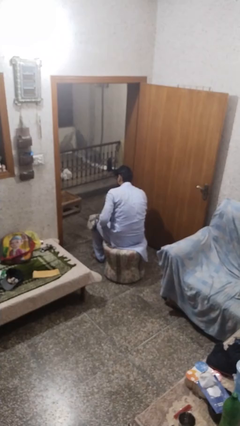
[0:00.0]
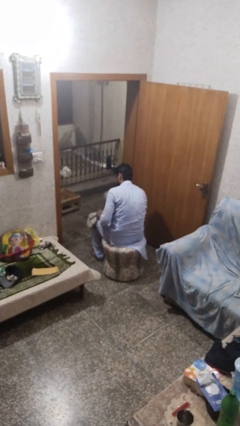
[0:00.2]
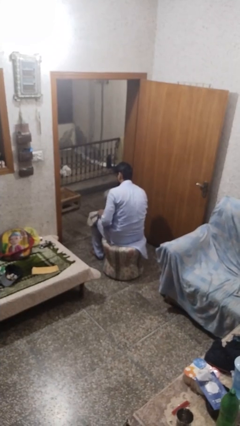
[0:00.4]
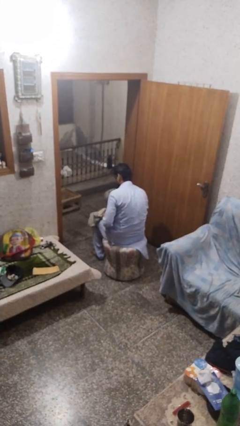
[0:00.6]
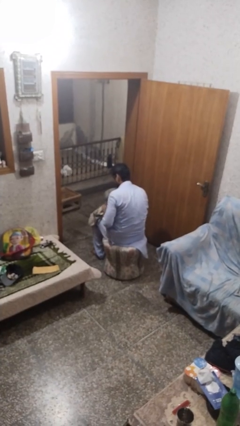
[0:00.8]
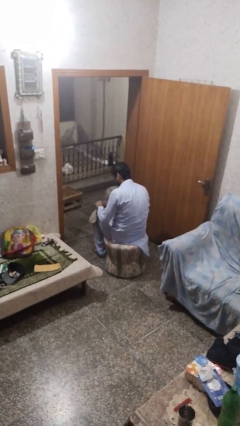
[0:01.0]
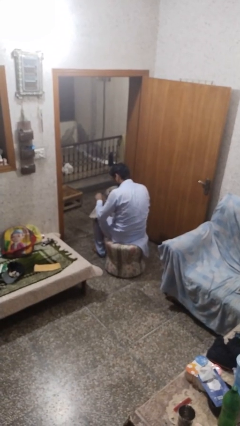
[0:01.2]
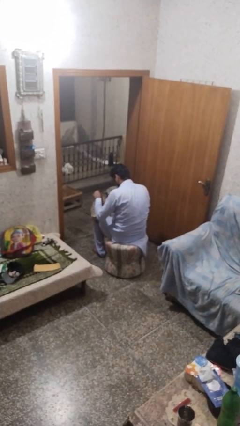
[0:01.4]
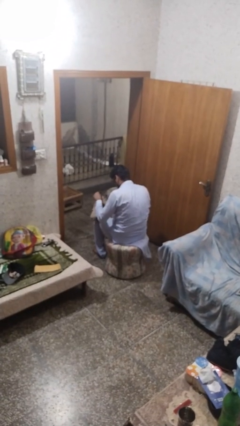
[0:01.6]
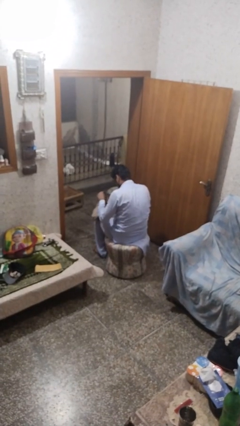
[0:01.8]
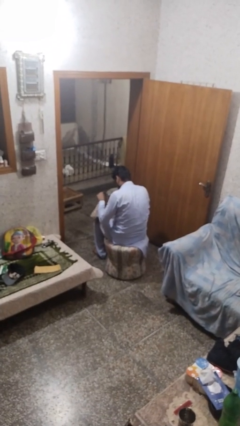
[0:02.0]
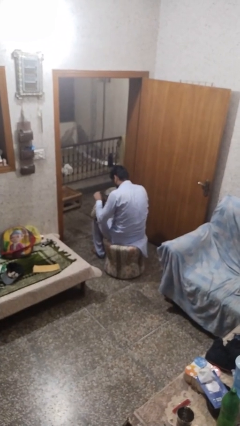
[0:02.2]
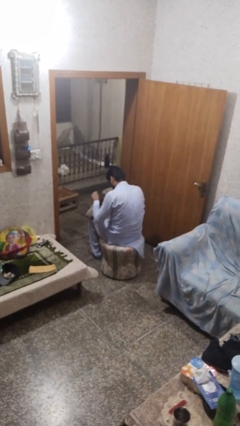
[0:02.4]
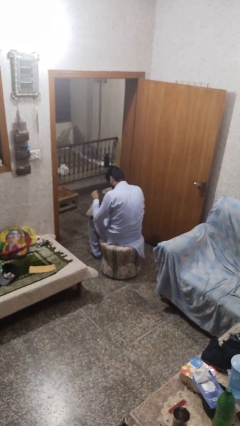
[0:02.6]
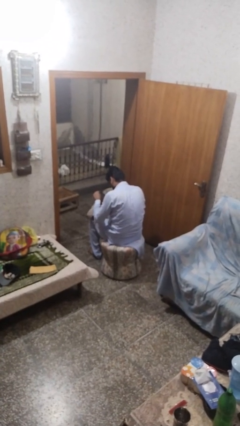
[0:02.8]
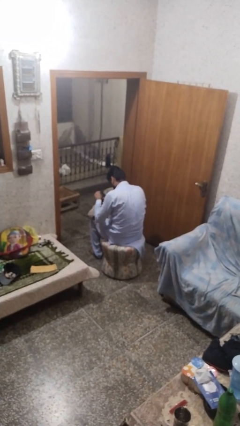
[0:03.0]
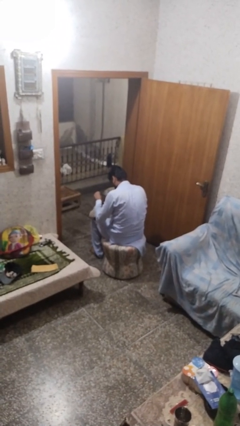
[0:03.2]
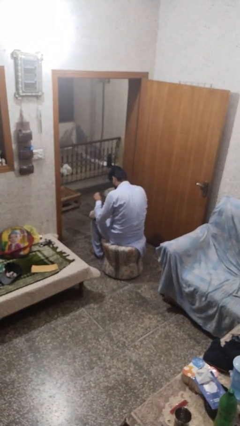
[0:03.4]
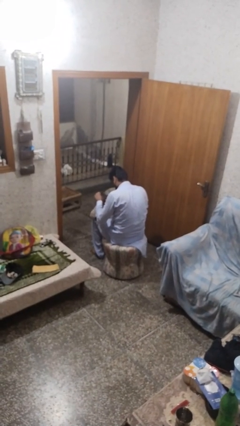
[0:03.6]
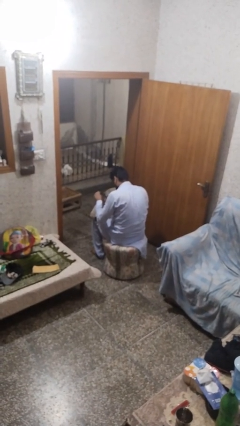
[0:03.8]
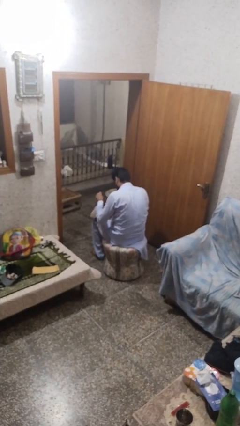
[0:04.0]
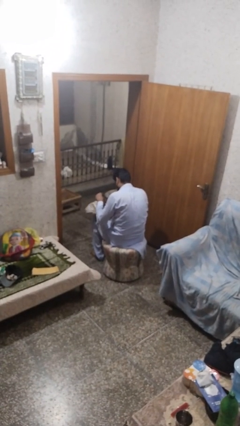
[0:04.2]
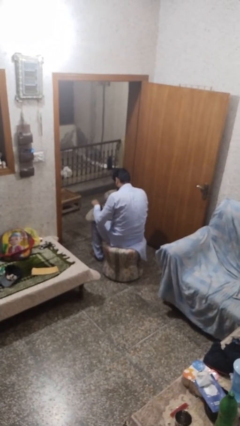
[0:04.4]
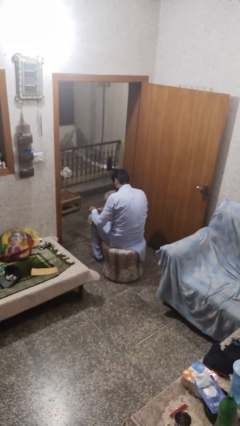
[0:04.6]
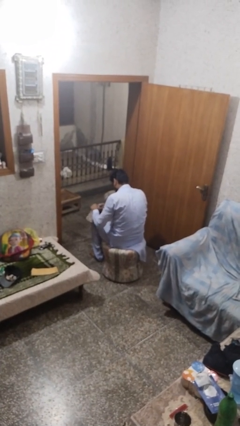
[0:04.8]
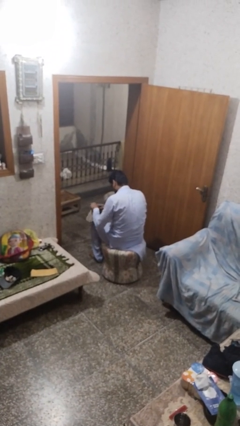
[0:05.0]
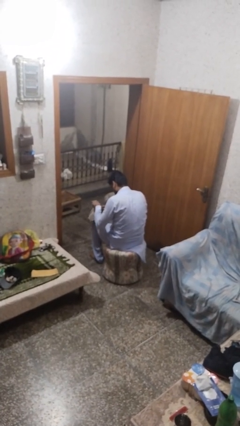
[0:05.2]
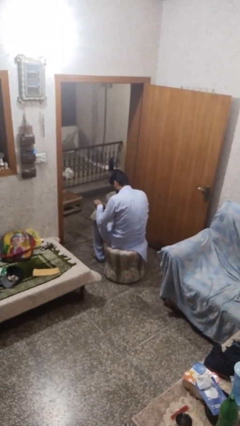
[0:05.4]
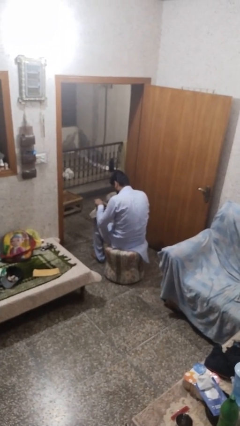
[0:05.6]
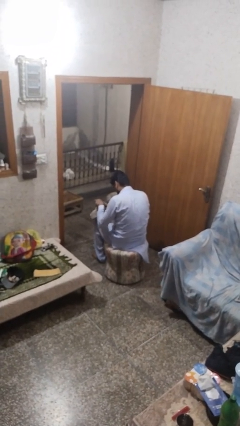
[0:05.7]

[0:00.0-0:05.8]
person searches in purse

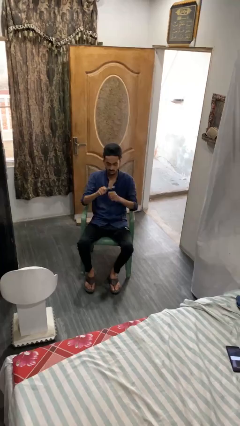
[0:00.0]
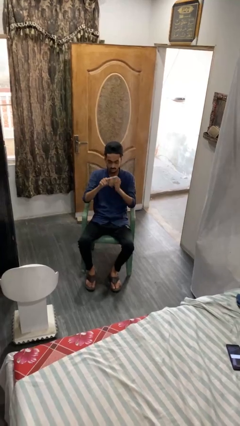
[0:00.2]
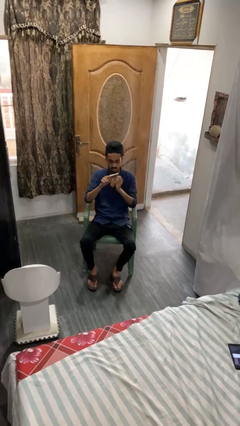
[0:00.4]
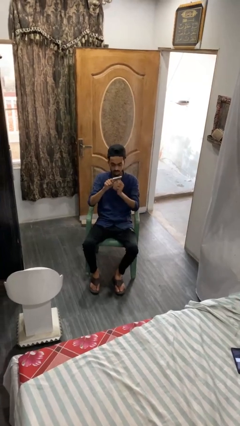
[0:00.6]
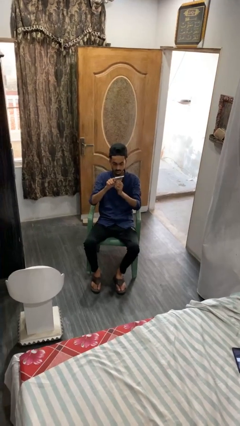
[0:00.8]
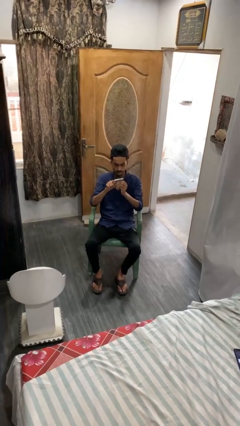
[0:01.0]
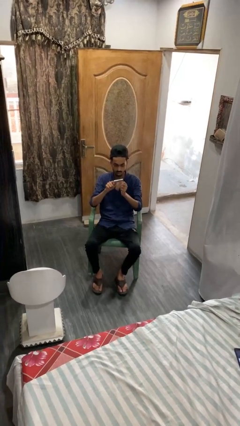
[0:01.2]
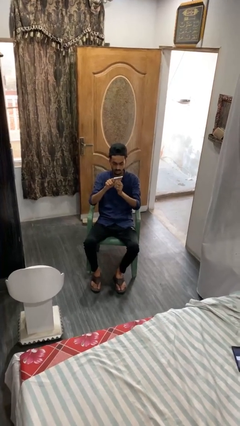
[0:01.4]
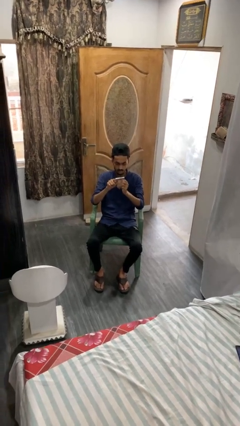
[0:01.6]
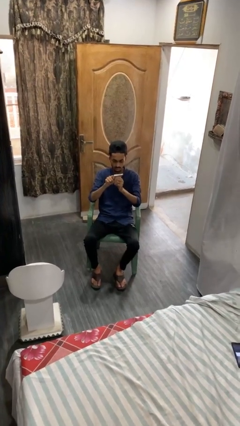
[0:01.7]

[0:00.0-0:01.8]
person files fingernails

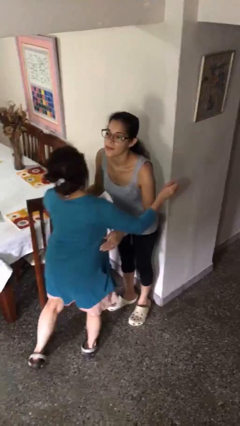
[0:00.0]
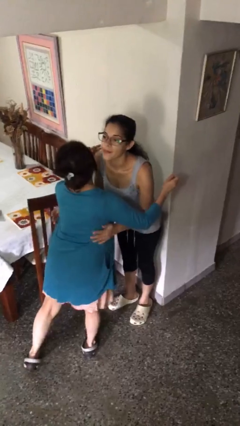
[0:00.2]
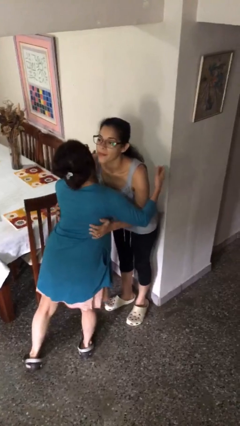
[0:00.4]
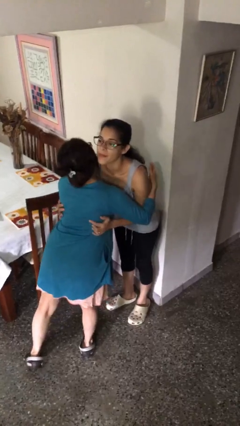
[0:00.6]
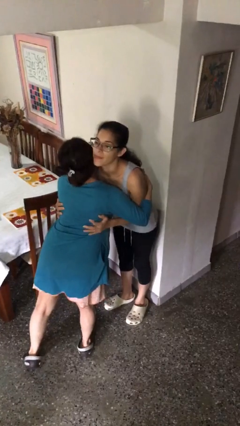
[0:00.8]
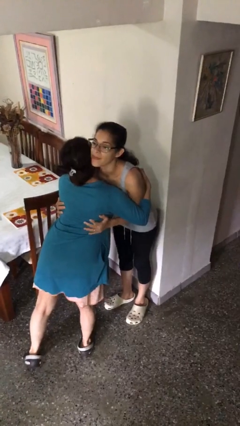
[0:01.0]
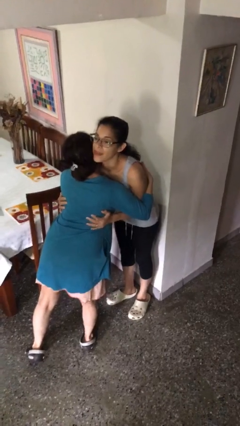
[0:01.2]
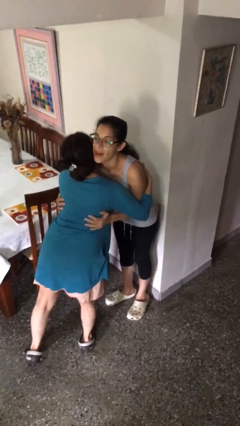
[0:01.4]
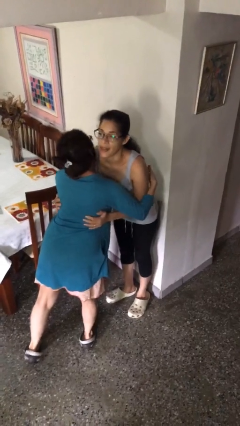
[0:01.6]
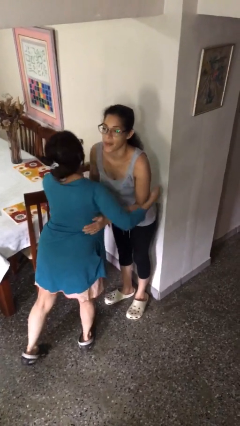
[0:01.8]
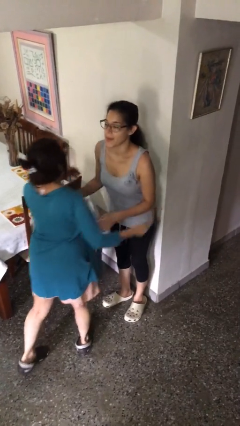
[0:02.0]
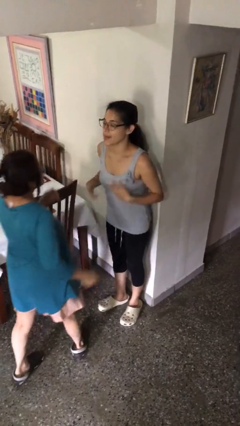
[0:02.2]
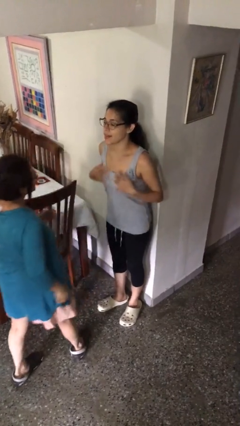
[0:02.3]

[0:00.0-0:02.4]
person embraces person

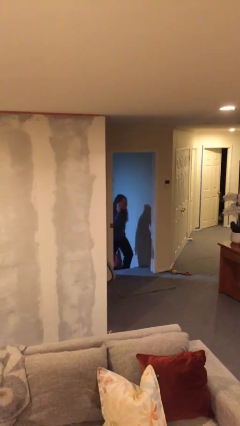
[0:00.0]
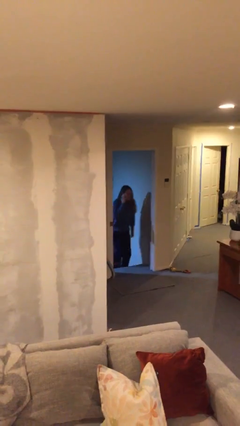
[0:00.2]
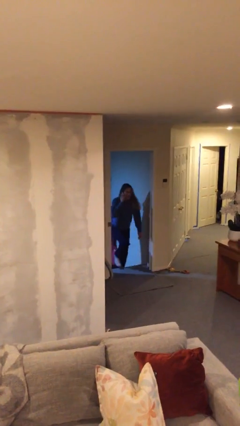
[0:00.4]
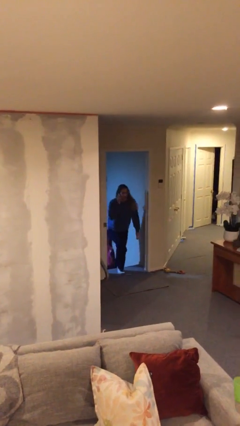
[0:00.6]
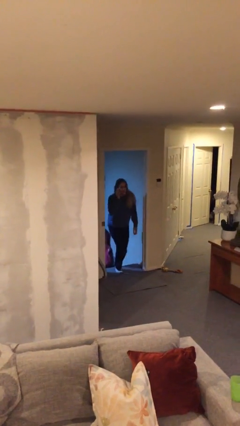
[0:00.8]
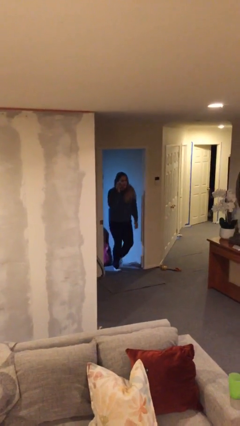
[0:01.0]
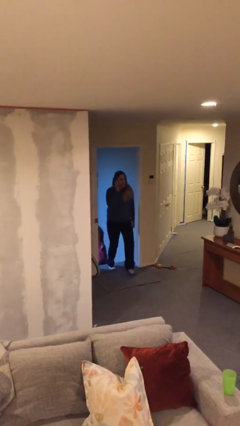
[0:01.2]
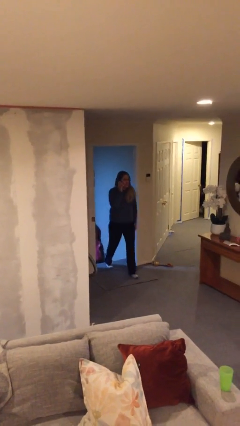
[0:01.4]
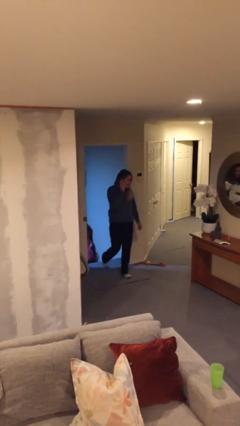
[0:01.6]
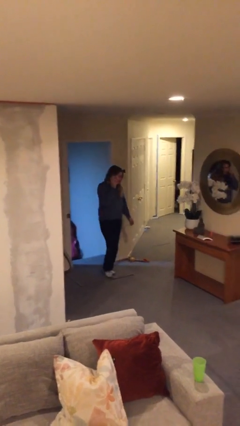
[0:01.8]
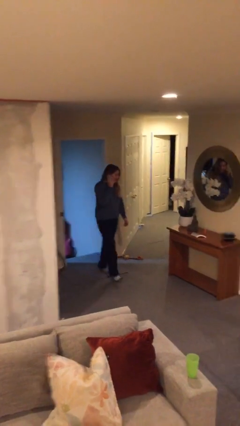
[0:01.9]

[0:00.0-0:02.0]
person enters scene through structure

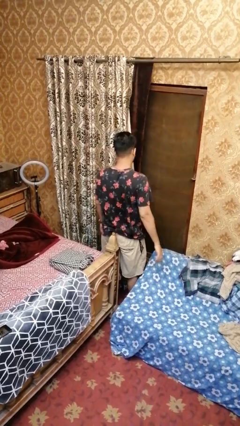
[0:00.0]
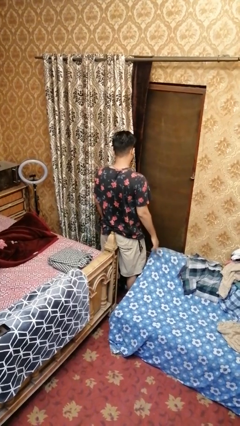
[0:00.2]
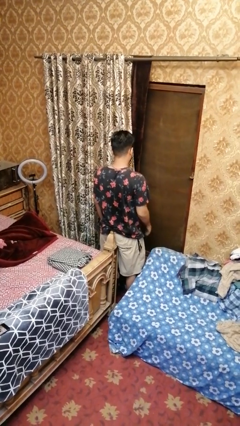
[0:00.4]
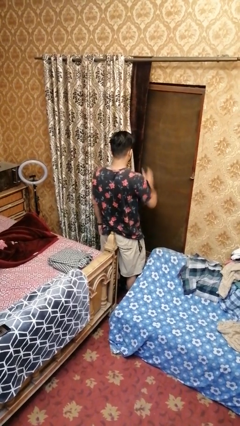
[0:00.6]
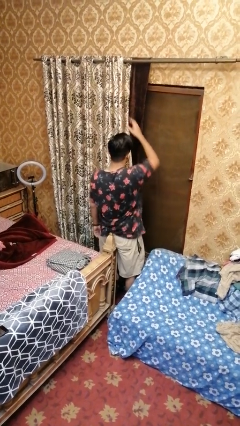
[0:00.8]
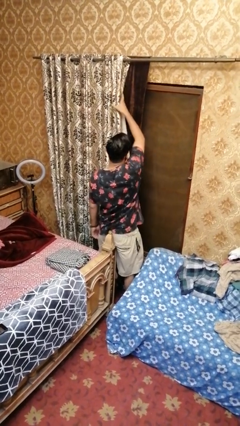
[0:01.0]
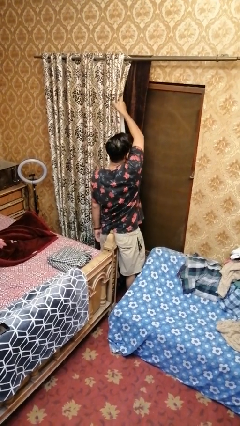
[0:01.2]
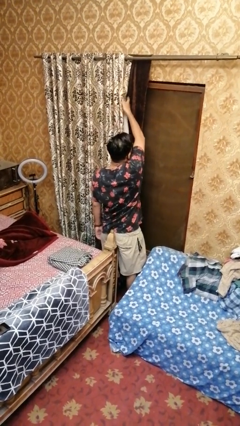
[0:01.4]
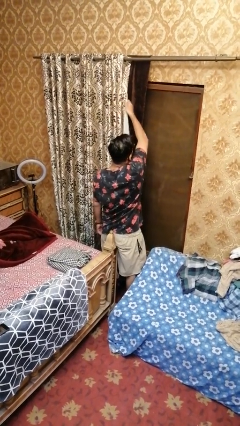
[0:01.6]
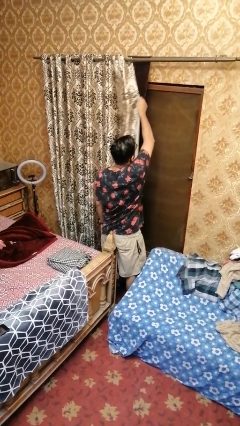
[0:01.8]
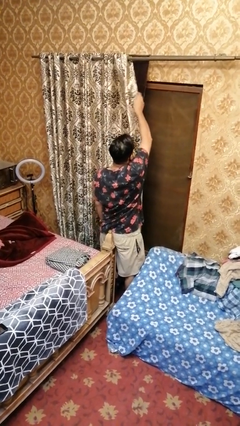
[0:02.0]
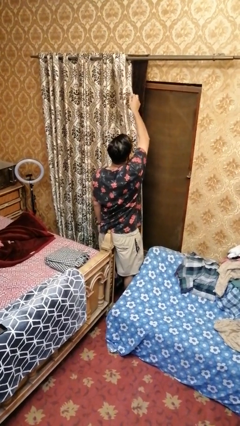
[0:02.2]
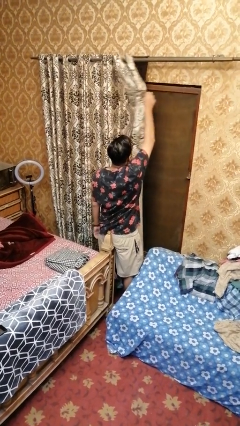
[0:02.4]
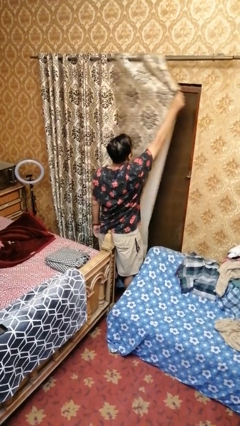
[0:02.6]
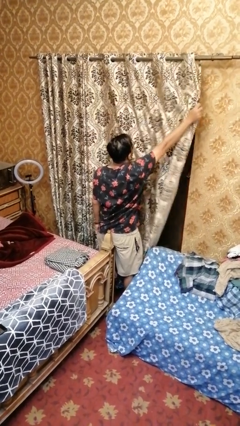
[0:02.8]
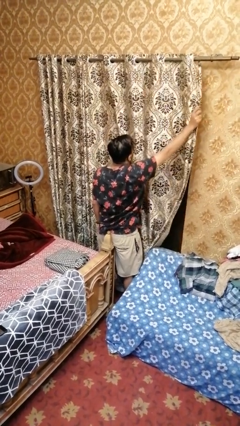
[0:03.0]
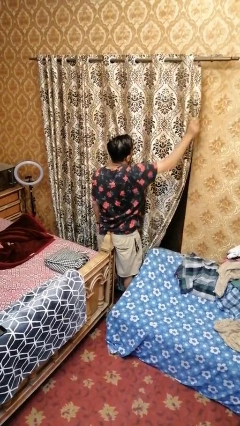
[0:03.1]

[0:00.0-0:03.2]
person closes curtains

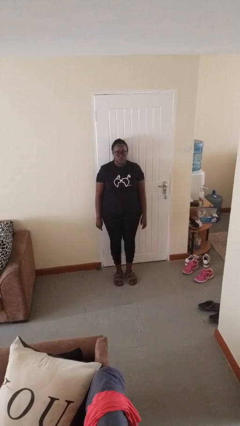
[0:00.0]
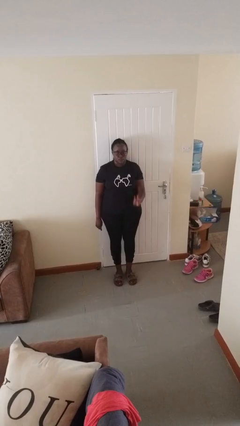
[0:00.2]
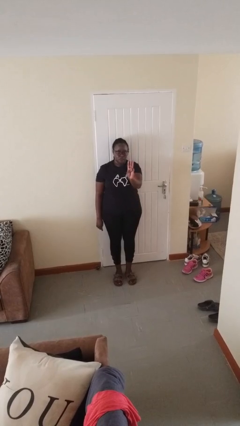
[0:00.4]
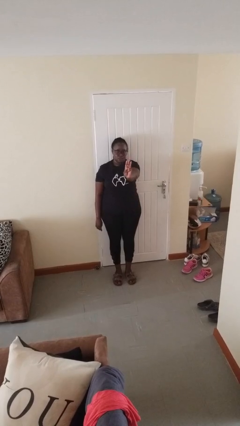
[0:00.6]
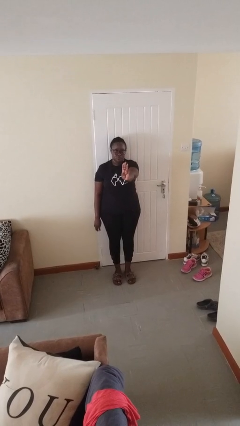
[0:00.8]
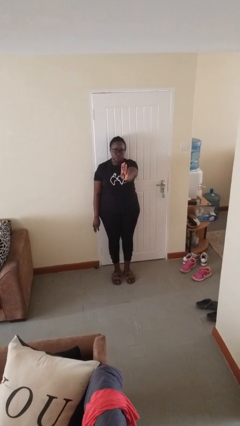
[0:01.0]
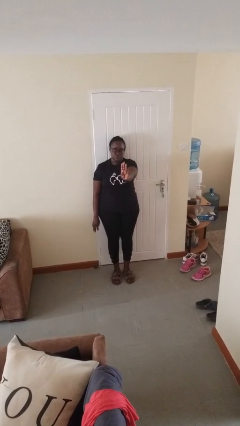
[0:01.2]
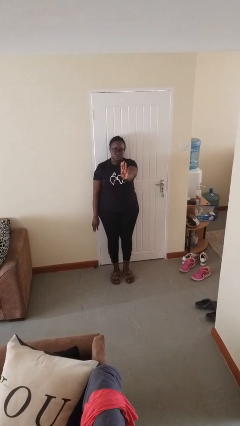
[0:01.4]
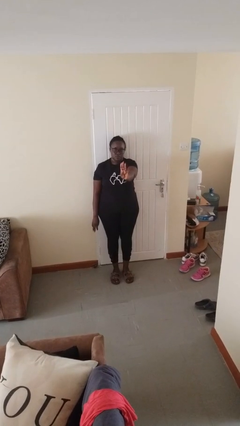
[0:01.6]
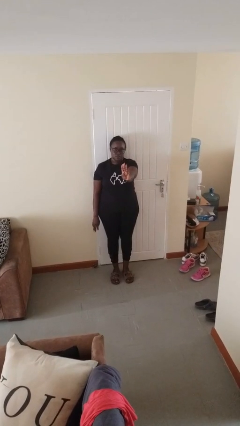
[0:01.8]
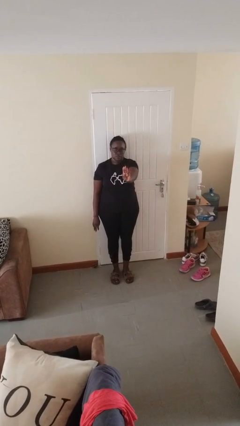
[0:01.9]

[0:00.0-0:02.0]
person gestures number three
